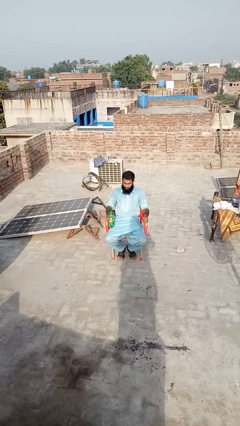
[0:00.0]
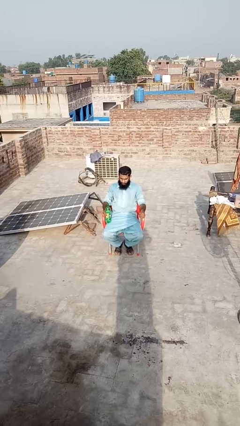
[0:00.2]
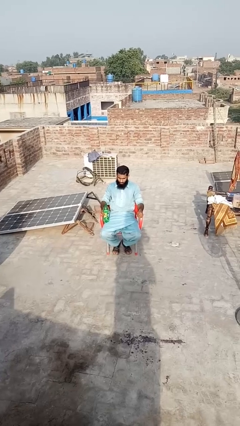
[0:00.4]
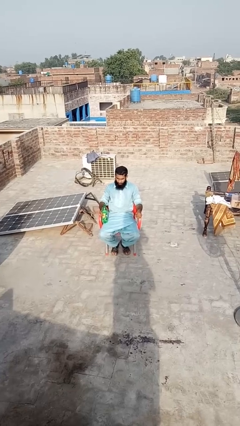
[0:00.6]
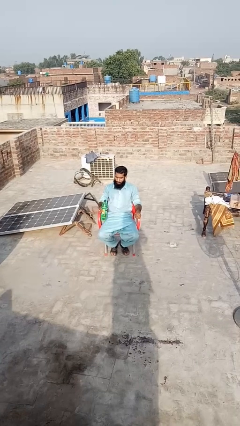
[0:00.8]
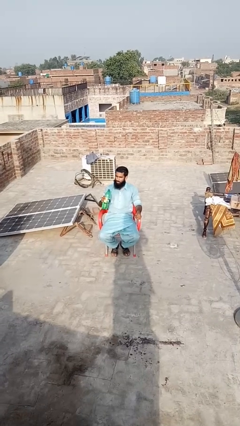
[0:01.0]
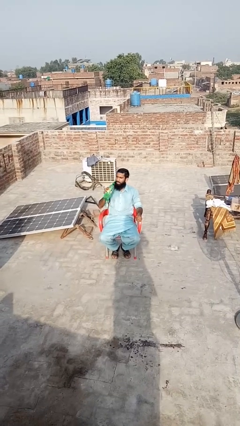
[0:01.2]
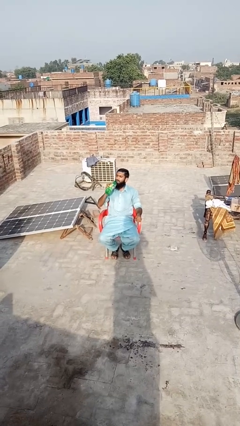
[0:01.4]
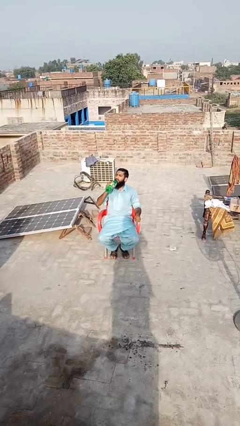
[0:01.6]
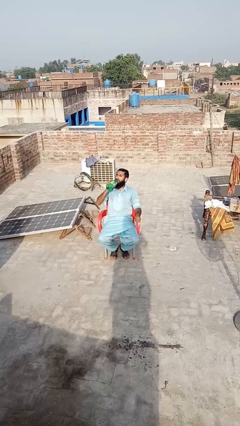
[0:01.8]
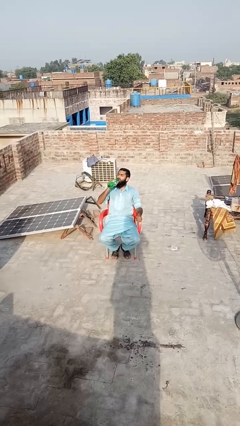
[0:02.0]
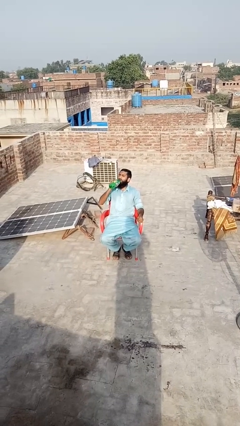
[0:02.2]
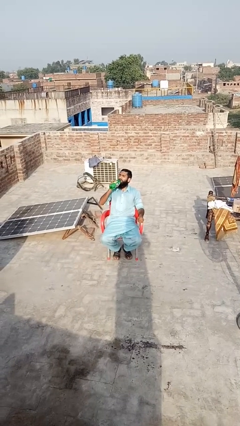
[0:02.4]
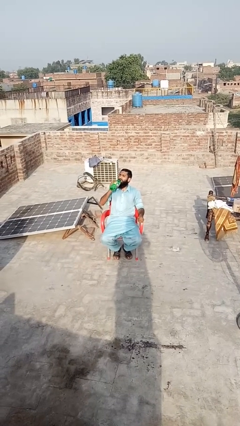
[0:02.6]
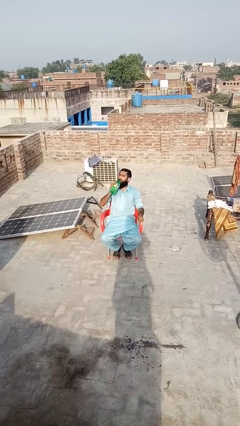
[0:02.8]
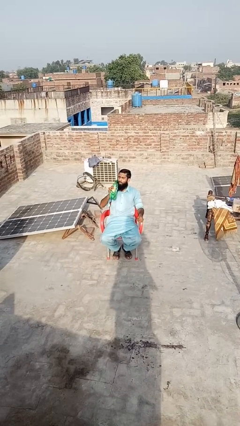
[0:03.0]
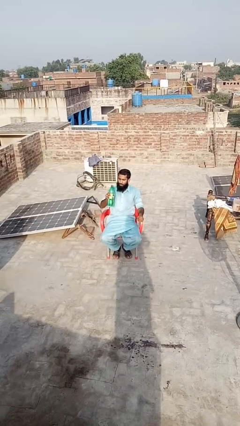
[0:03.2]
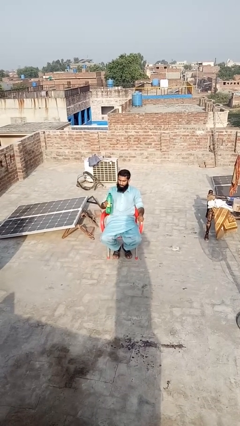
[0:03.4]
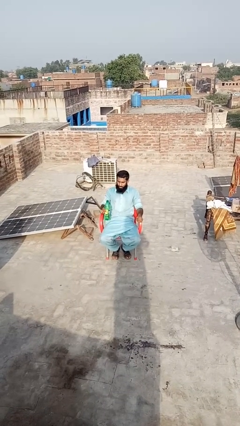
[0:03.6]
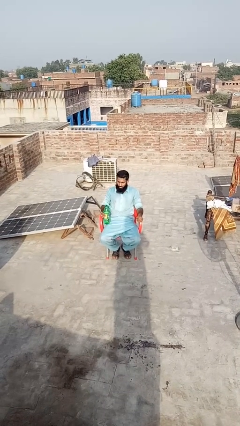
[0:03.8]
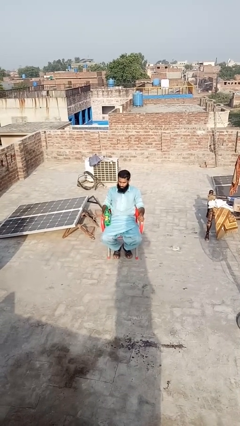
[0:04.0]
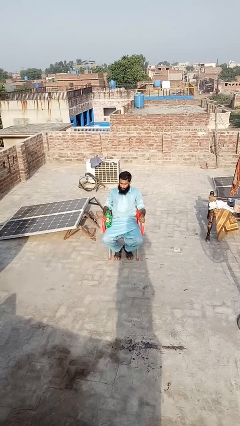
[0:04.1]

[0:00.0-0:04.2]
person drinks from bottle

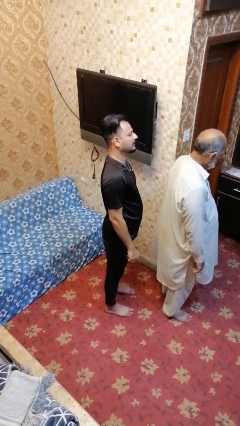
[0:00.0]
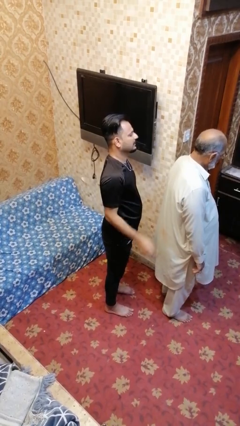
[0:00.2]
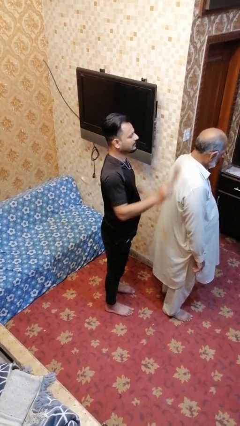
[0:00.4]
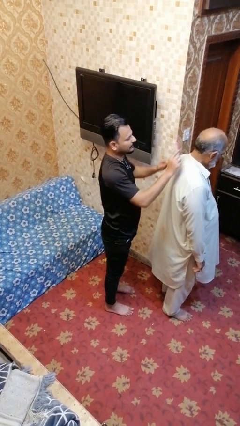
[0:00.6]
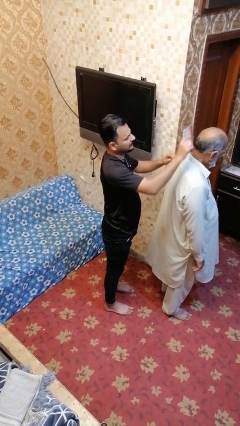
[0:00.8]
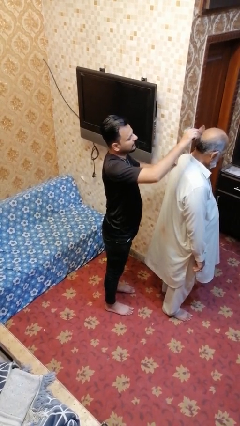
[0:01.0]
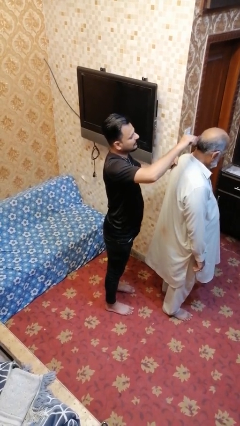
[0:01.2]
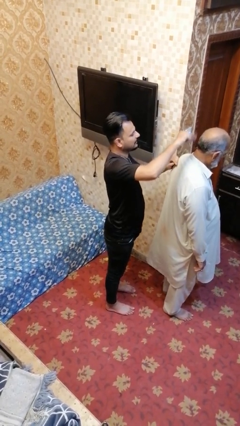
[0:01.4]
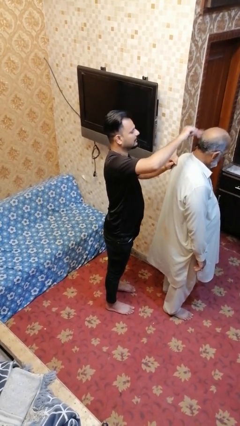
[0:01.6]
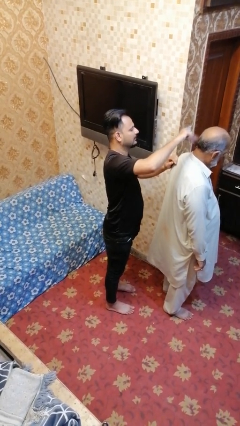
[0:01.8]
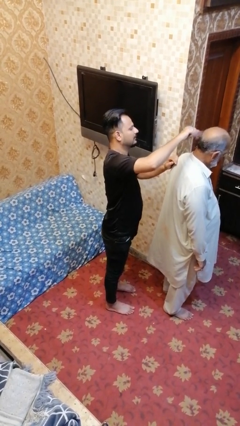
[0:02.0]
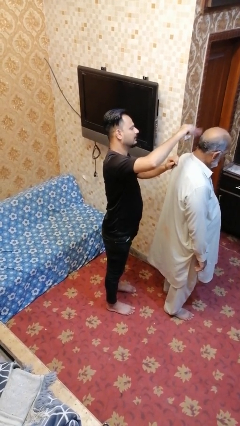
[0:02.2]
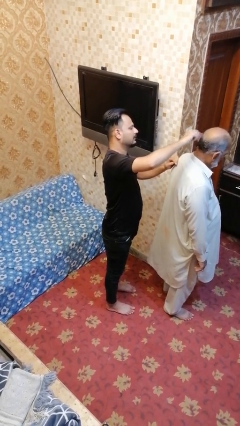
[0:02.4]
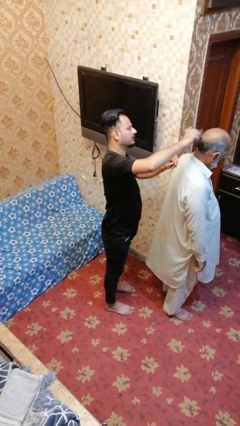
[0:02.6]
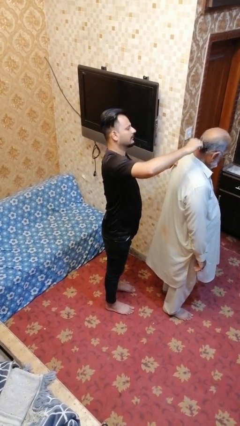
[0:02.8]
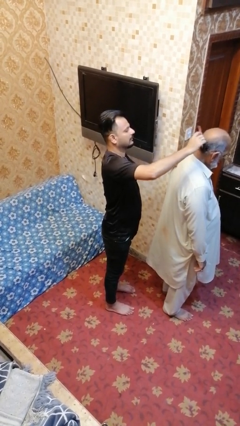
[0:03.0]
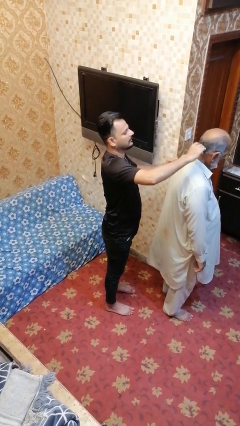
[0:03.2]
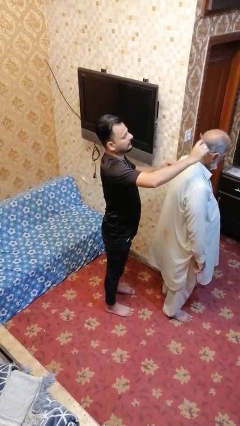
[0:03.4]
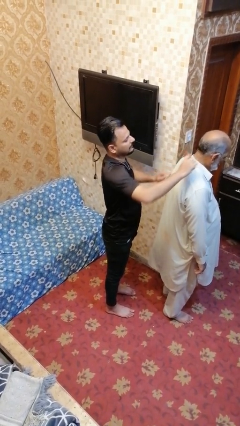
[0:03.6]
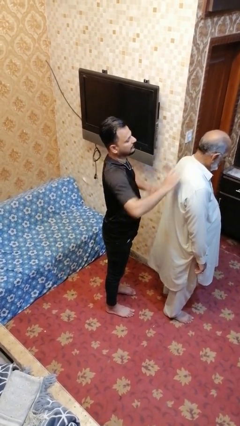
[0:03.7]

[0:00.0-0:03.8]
person brushes hair of person

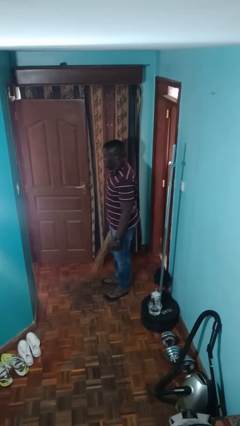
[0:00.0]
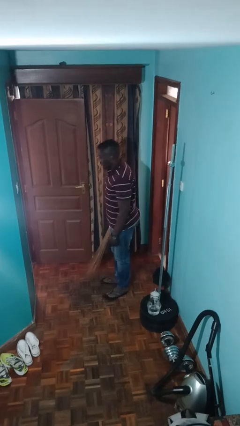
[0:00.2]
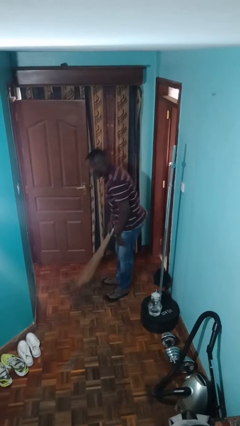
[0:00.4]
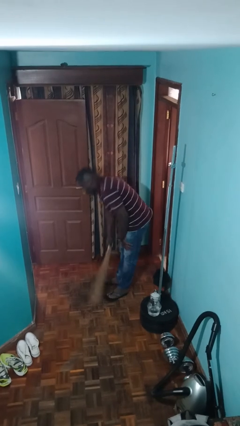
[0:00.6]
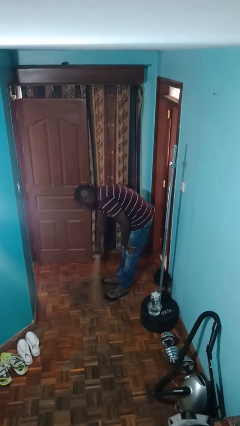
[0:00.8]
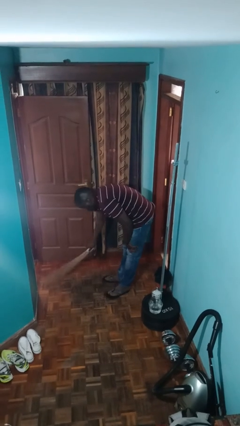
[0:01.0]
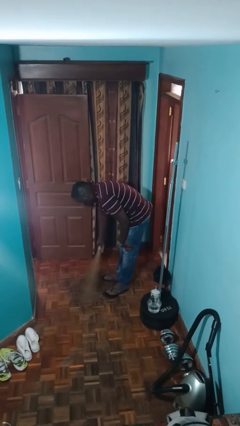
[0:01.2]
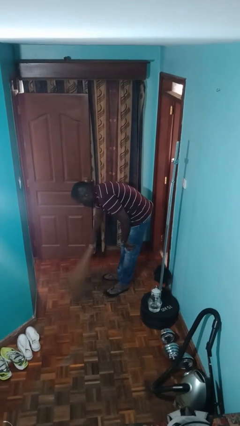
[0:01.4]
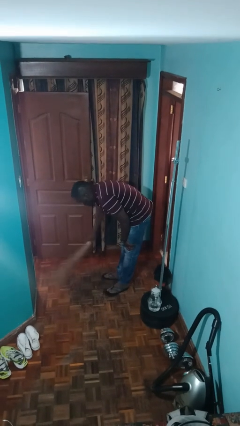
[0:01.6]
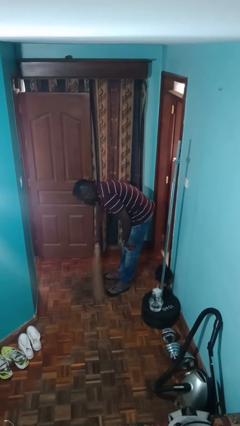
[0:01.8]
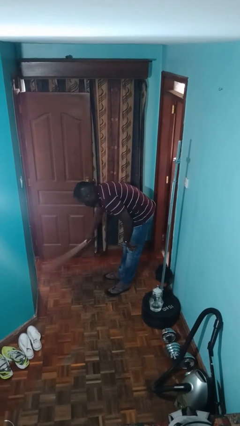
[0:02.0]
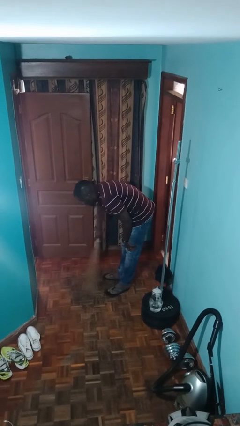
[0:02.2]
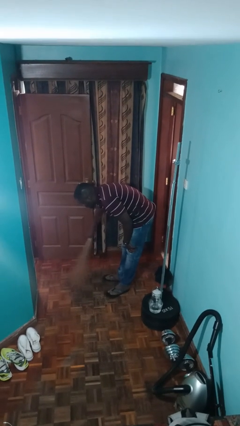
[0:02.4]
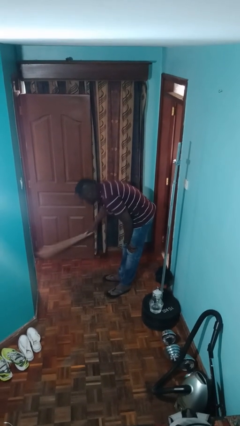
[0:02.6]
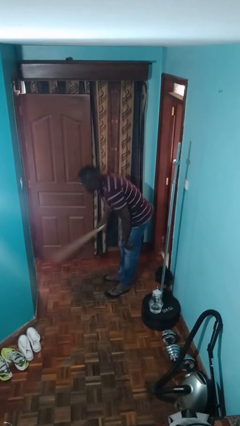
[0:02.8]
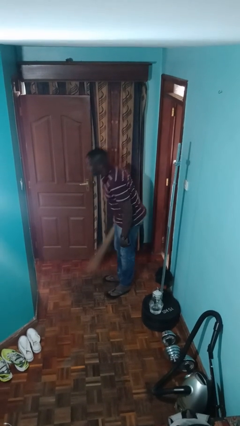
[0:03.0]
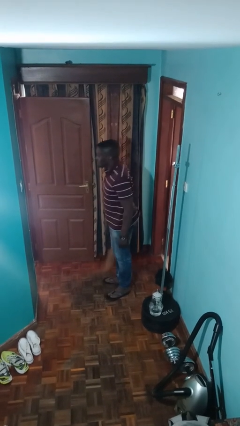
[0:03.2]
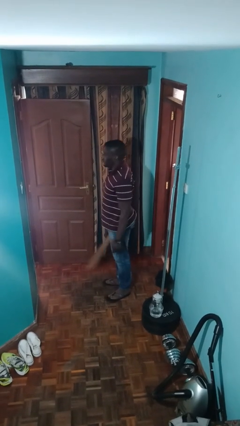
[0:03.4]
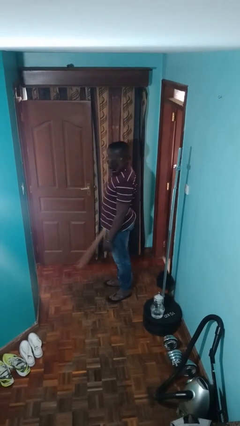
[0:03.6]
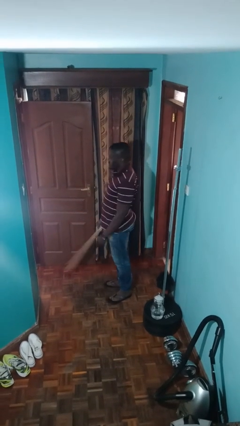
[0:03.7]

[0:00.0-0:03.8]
person sweeps floor

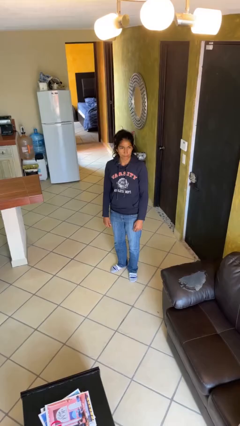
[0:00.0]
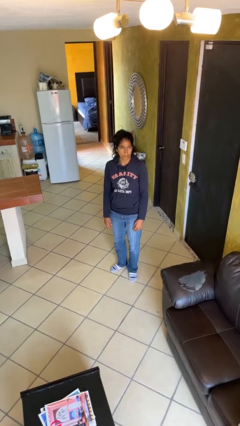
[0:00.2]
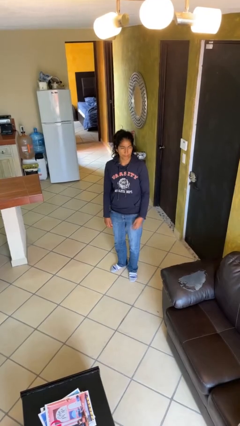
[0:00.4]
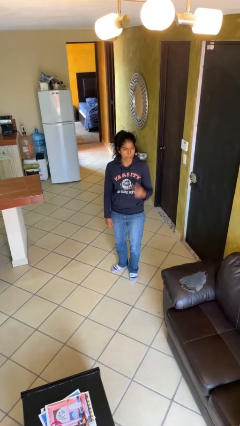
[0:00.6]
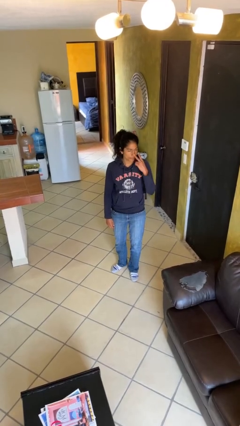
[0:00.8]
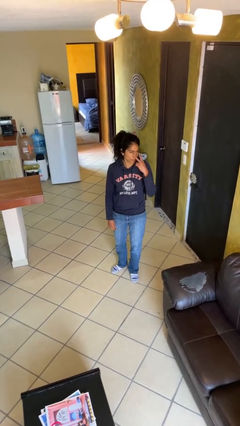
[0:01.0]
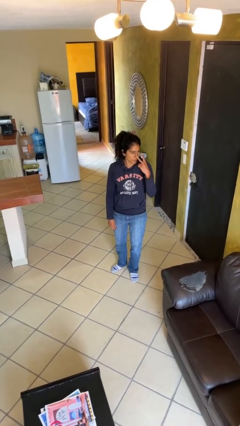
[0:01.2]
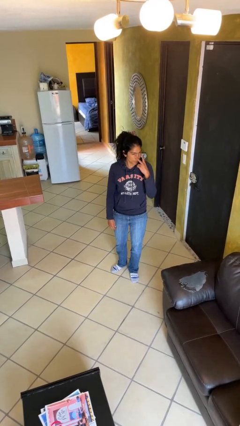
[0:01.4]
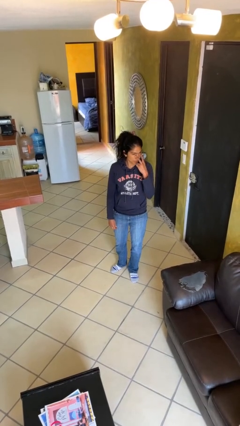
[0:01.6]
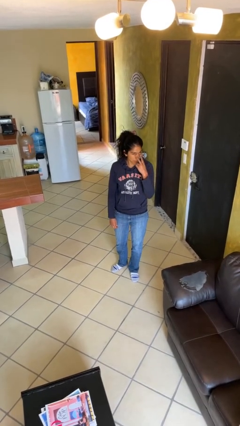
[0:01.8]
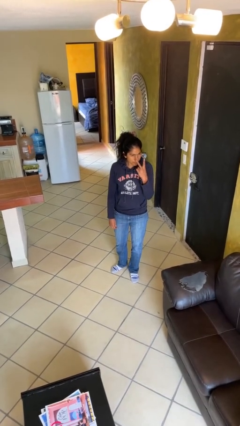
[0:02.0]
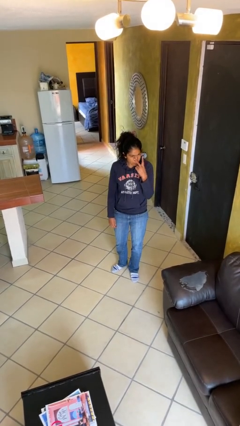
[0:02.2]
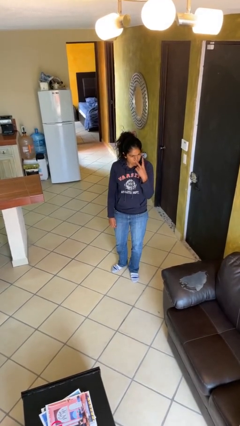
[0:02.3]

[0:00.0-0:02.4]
person gestures watch closely

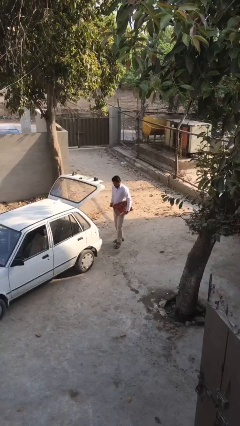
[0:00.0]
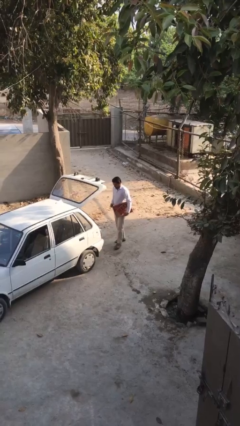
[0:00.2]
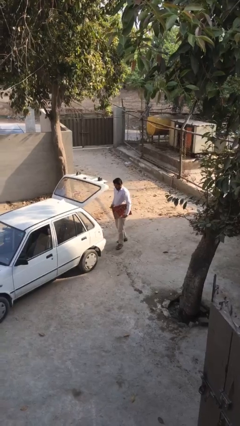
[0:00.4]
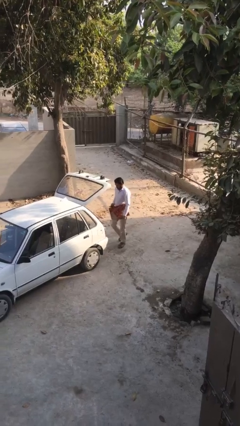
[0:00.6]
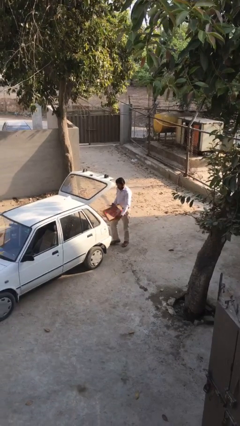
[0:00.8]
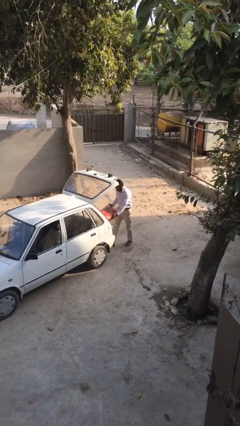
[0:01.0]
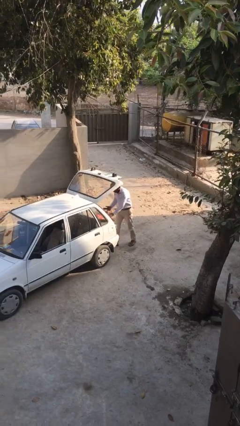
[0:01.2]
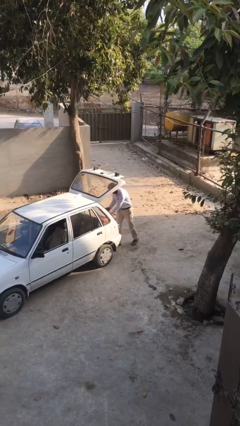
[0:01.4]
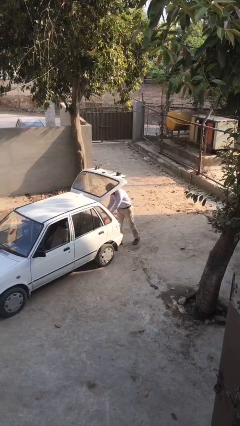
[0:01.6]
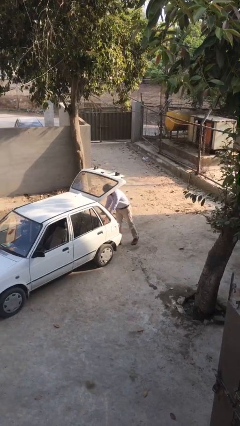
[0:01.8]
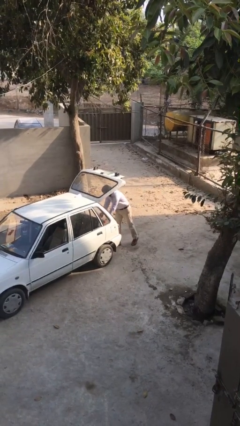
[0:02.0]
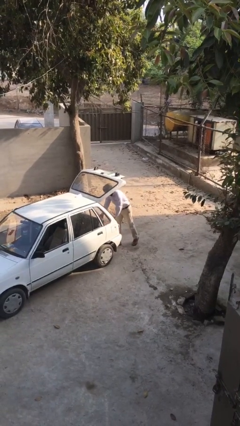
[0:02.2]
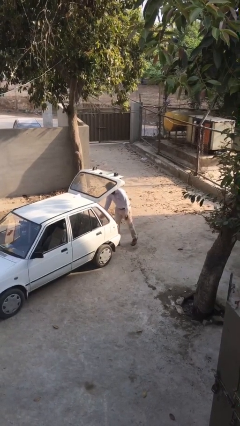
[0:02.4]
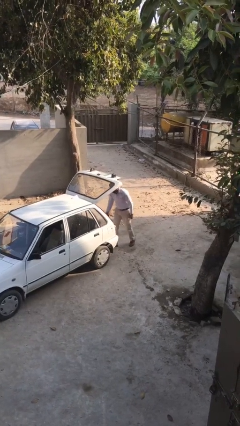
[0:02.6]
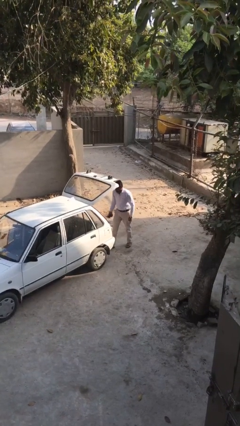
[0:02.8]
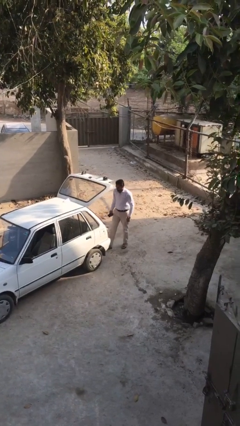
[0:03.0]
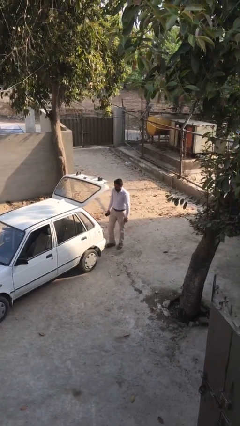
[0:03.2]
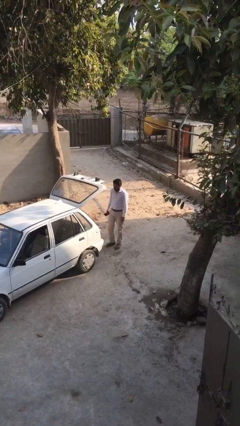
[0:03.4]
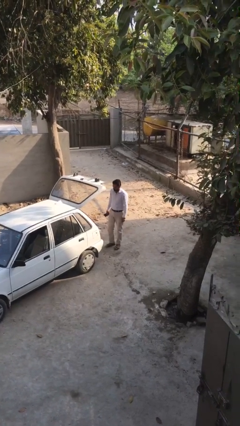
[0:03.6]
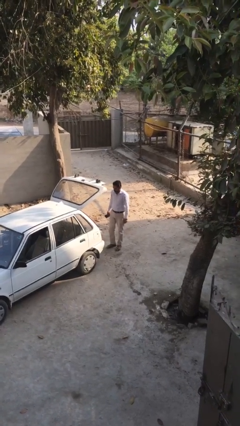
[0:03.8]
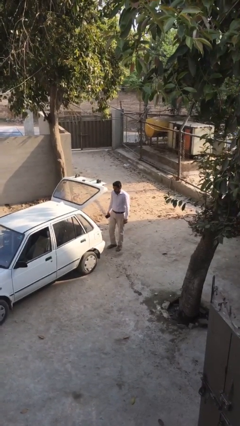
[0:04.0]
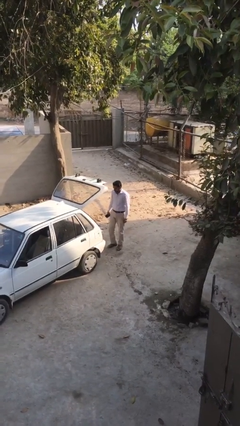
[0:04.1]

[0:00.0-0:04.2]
person loads car
